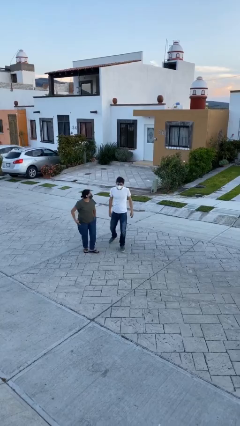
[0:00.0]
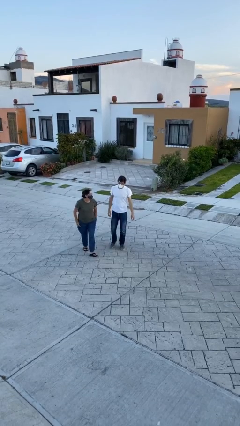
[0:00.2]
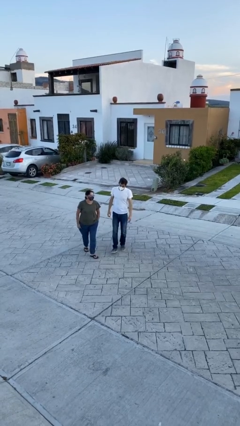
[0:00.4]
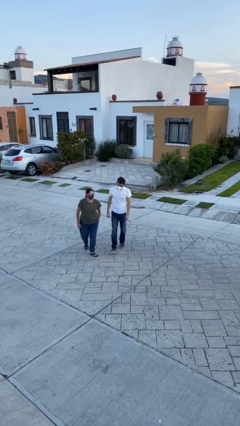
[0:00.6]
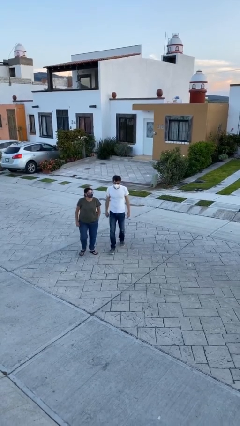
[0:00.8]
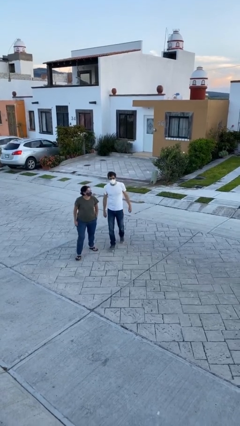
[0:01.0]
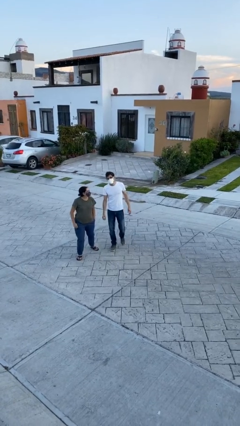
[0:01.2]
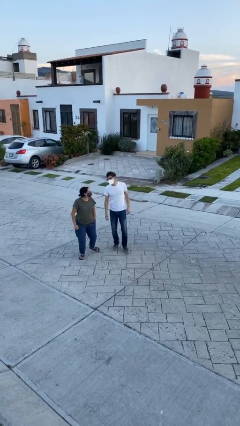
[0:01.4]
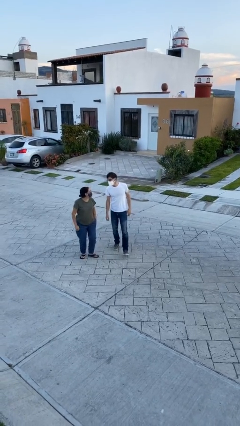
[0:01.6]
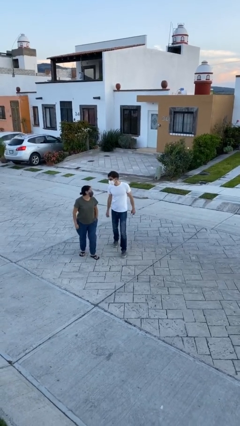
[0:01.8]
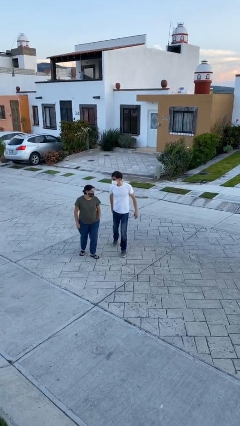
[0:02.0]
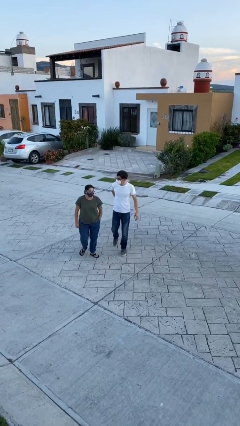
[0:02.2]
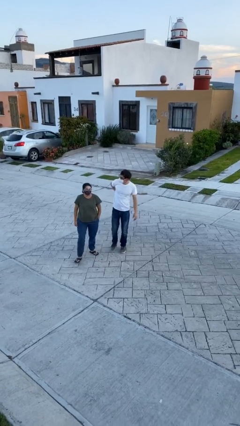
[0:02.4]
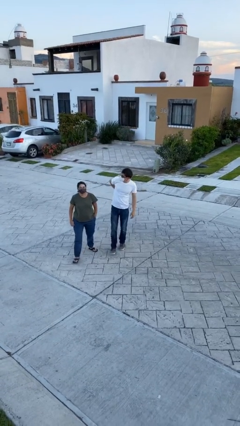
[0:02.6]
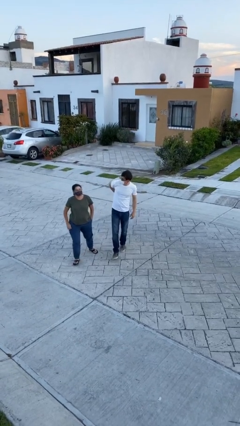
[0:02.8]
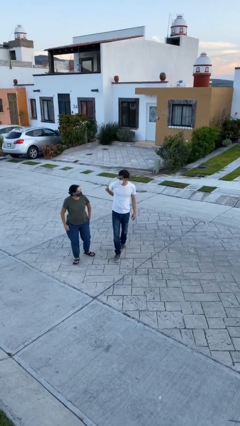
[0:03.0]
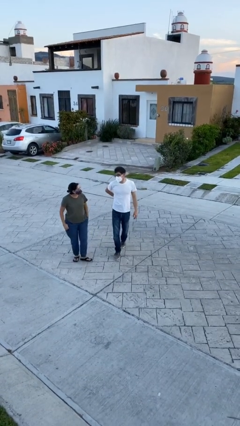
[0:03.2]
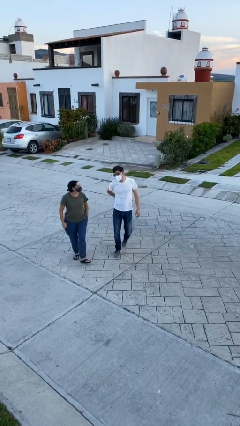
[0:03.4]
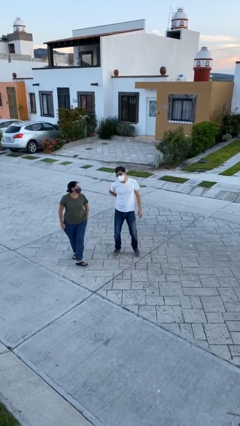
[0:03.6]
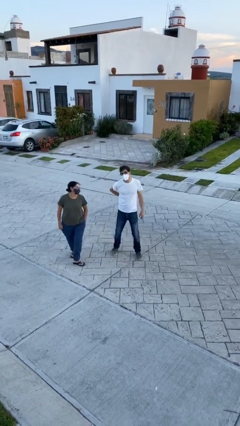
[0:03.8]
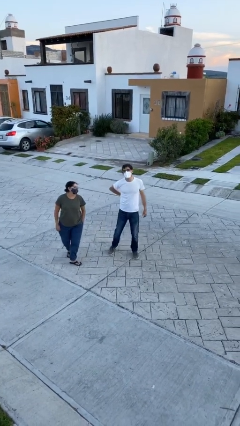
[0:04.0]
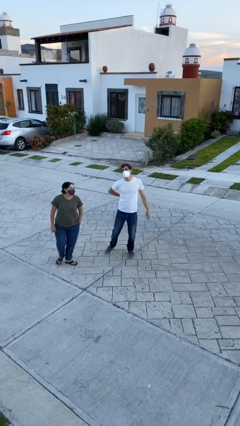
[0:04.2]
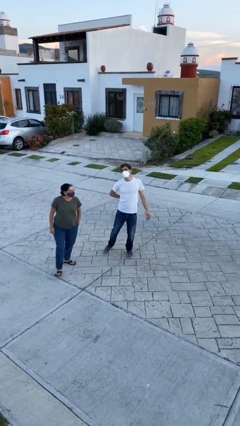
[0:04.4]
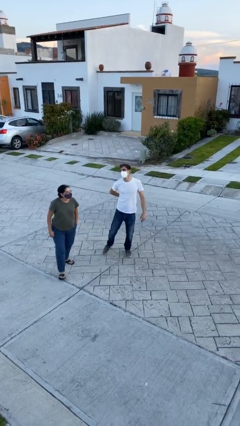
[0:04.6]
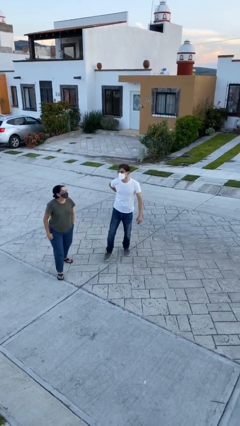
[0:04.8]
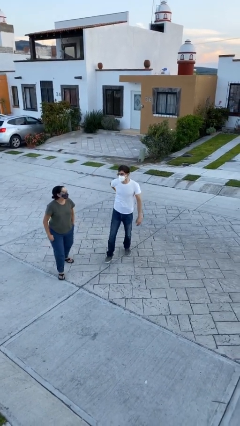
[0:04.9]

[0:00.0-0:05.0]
person talks to person

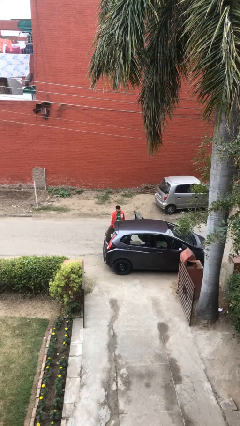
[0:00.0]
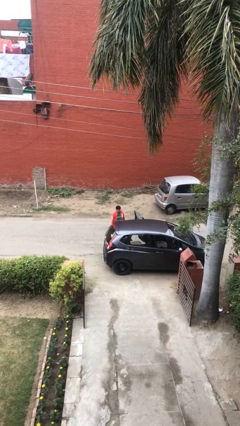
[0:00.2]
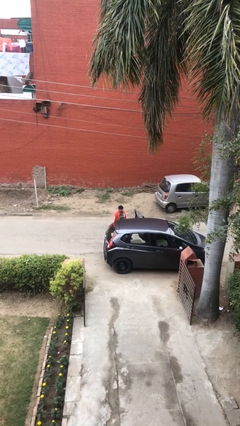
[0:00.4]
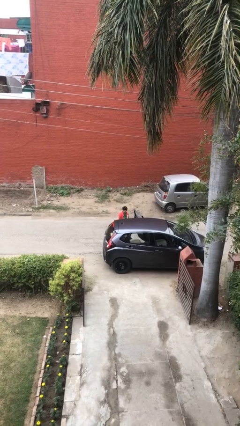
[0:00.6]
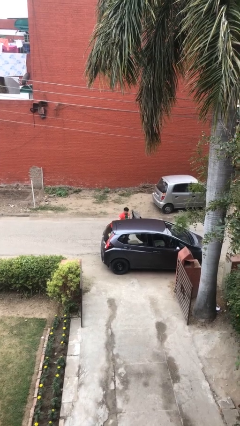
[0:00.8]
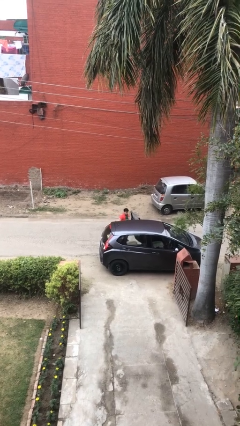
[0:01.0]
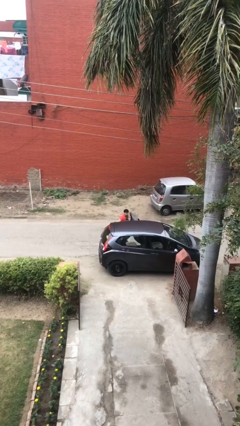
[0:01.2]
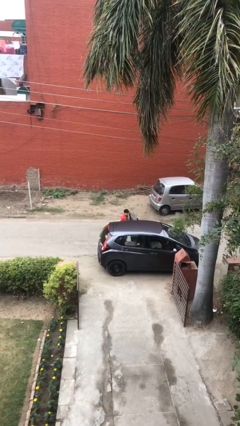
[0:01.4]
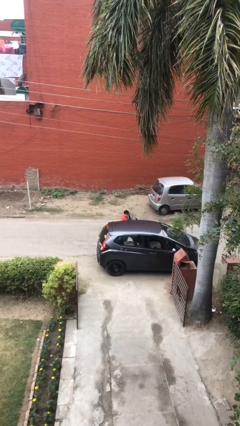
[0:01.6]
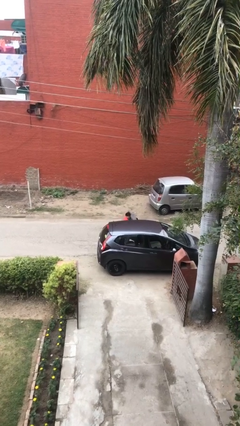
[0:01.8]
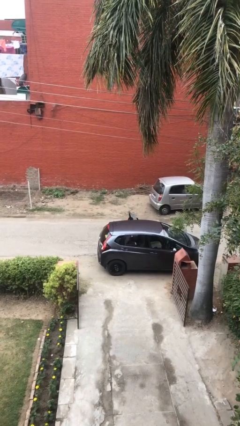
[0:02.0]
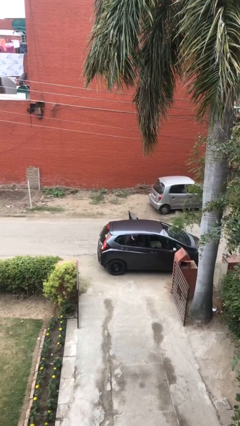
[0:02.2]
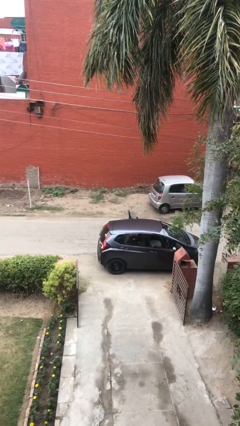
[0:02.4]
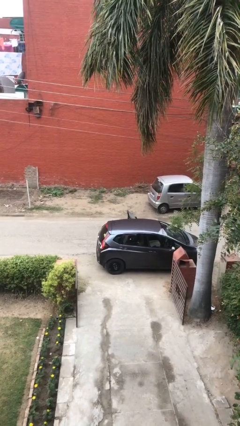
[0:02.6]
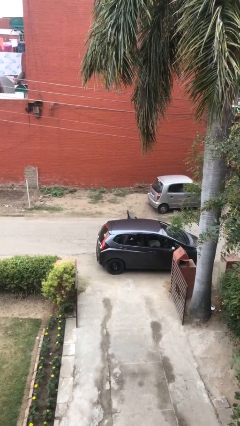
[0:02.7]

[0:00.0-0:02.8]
person enters car

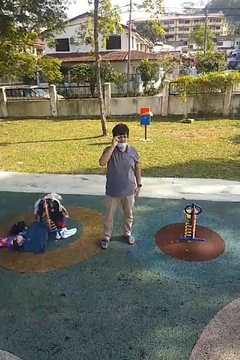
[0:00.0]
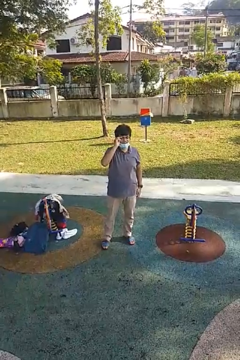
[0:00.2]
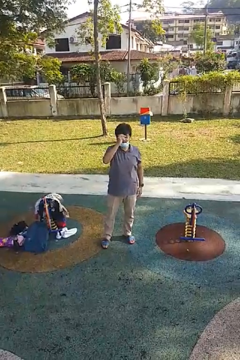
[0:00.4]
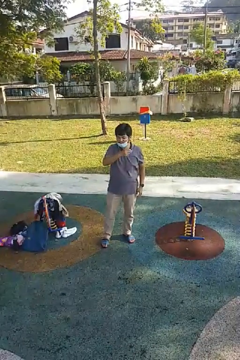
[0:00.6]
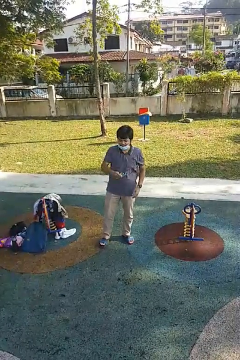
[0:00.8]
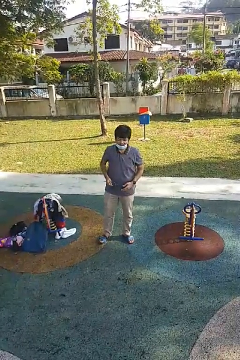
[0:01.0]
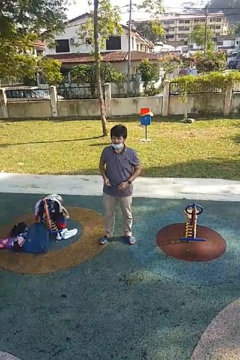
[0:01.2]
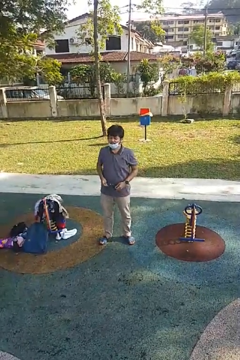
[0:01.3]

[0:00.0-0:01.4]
person takes off glasses

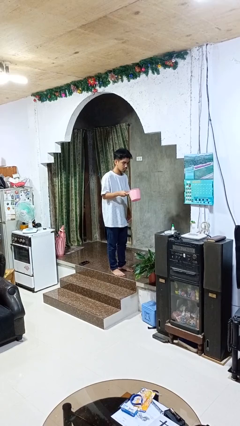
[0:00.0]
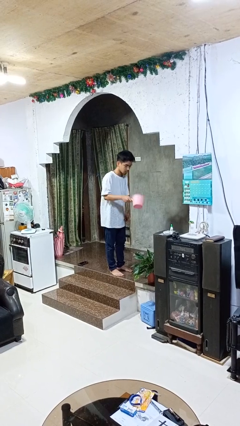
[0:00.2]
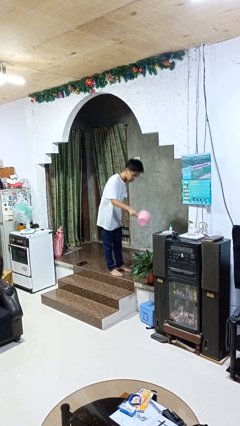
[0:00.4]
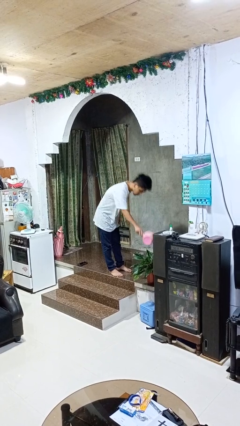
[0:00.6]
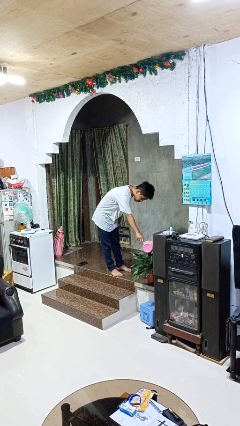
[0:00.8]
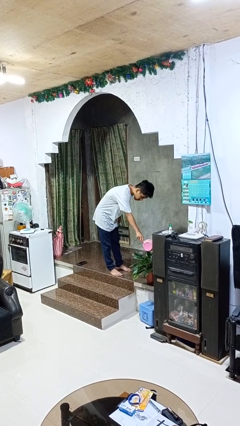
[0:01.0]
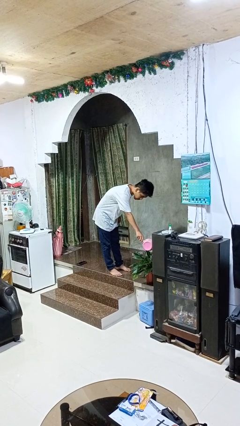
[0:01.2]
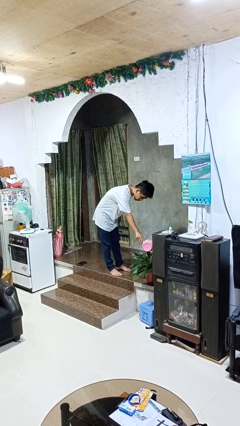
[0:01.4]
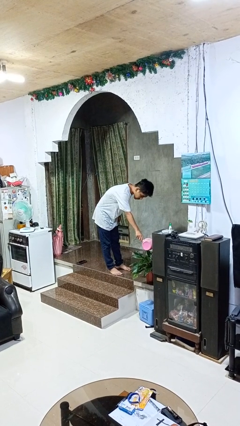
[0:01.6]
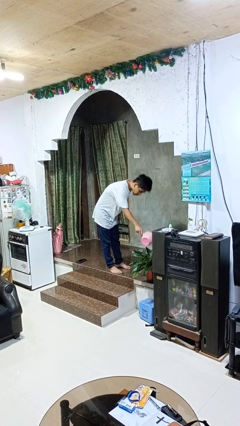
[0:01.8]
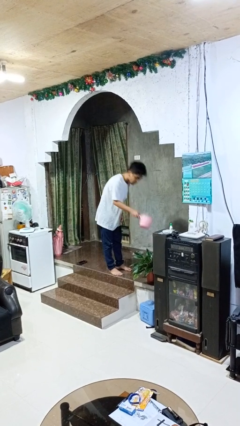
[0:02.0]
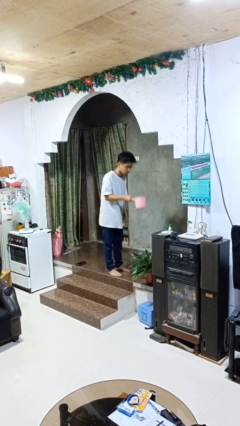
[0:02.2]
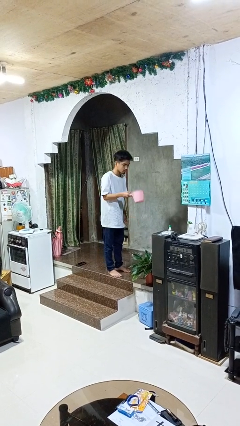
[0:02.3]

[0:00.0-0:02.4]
person waters houseplant

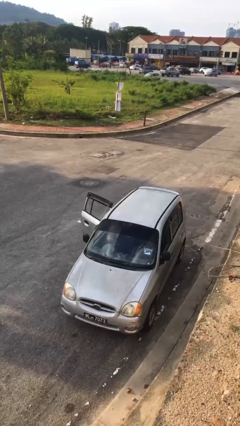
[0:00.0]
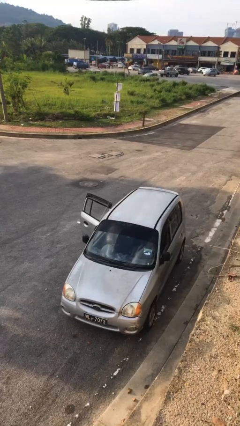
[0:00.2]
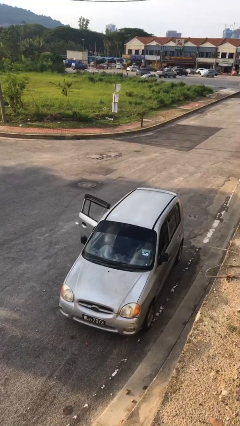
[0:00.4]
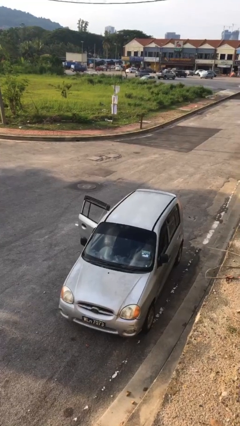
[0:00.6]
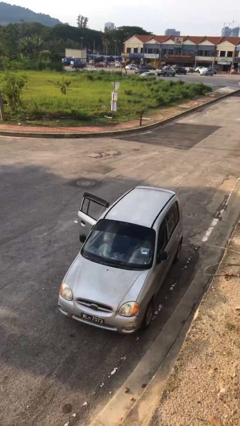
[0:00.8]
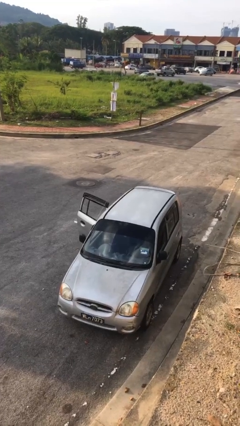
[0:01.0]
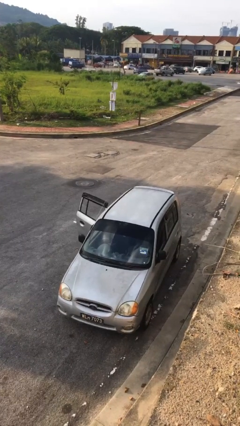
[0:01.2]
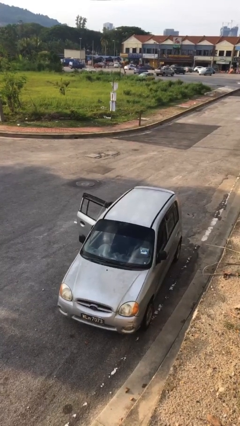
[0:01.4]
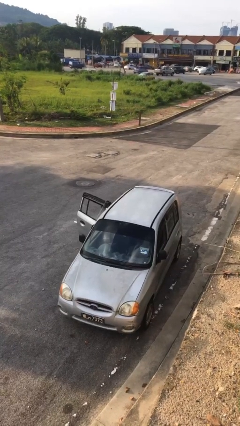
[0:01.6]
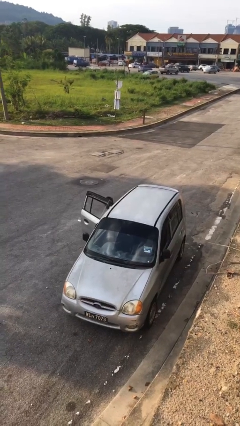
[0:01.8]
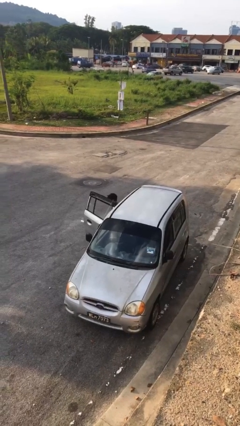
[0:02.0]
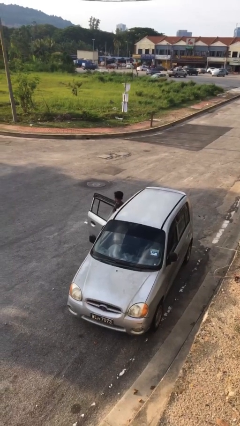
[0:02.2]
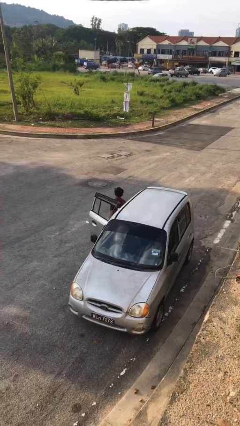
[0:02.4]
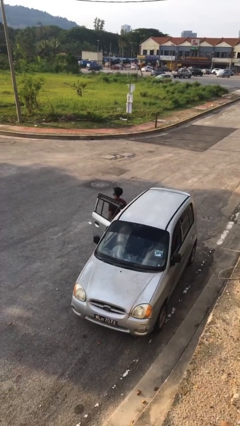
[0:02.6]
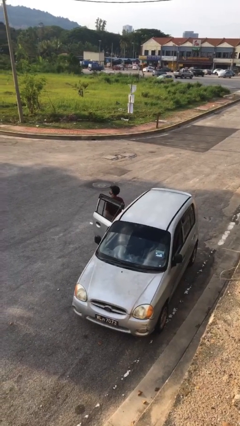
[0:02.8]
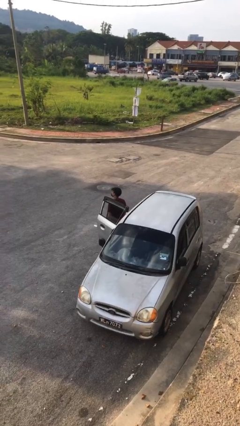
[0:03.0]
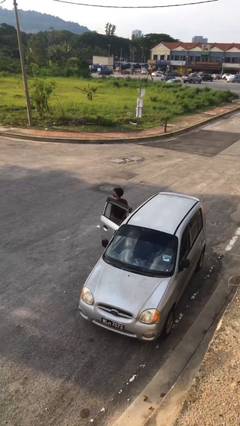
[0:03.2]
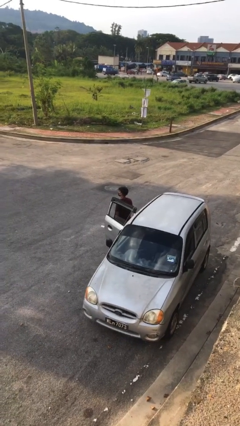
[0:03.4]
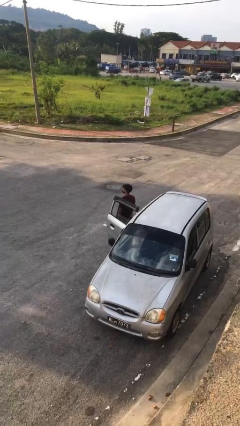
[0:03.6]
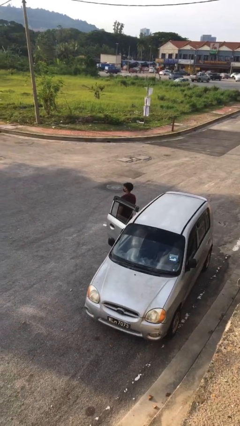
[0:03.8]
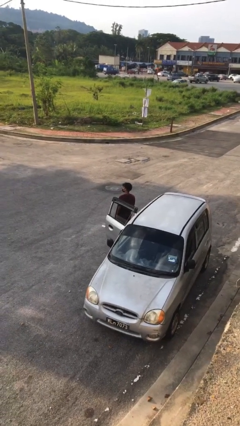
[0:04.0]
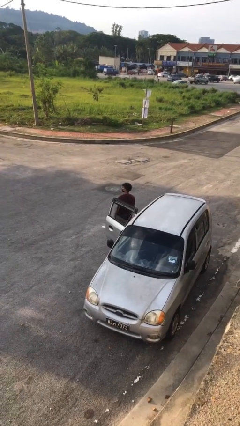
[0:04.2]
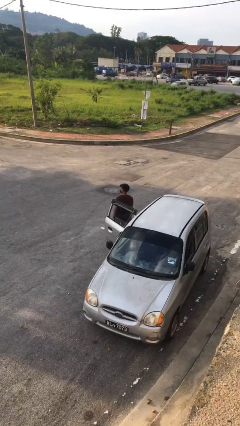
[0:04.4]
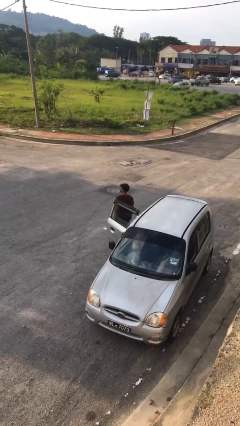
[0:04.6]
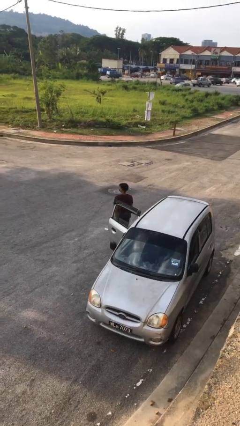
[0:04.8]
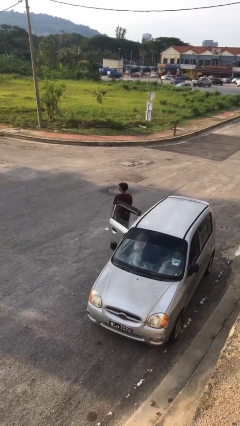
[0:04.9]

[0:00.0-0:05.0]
person exits car

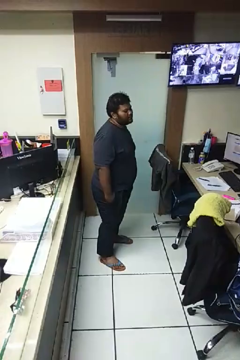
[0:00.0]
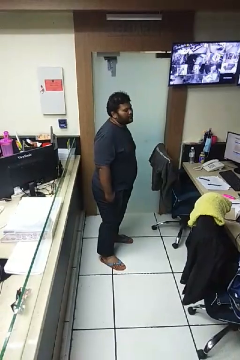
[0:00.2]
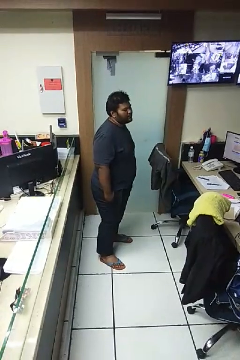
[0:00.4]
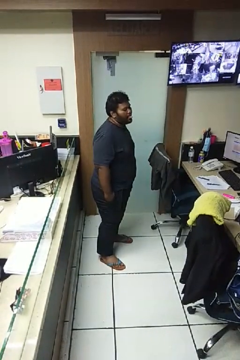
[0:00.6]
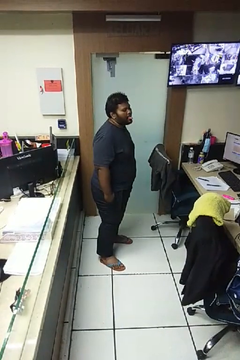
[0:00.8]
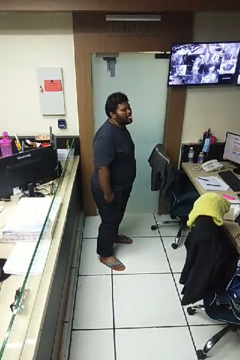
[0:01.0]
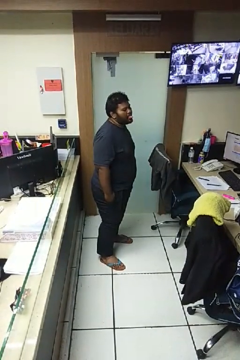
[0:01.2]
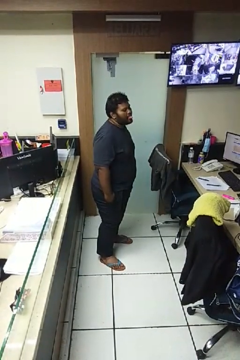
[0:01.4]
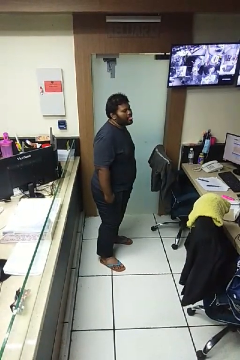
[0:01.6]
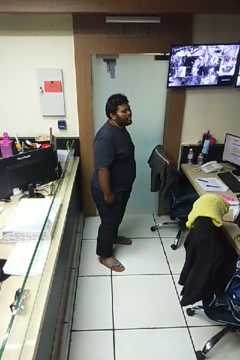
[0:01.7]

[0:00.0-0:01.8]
person sticks out tongue
